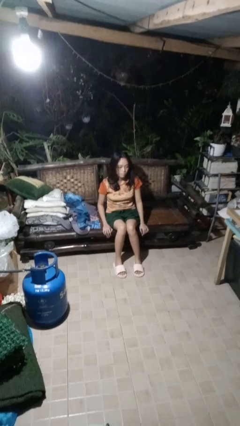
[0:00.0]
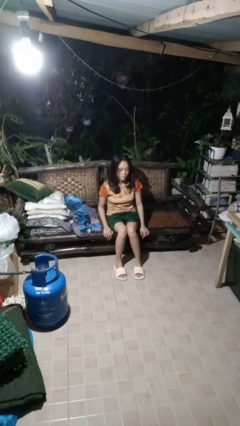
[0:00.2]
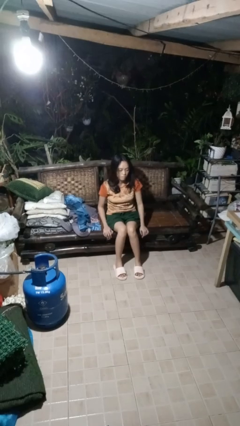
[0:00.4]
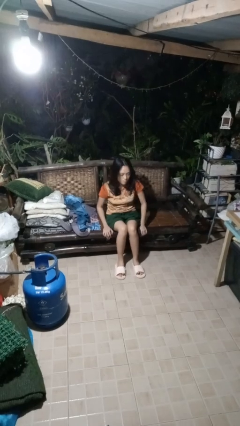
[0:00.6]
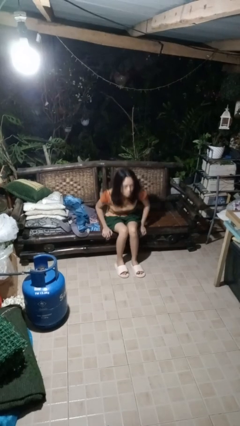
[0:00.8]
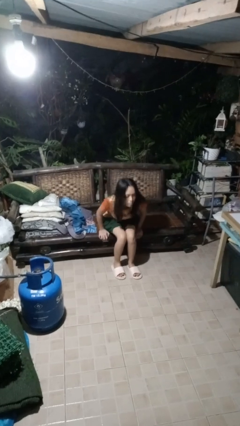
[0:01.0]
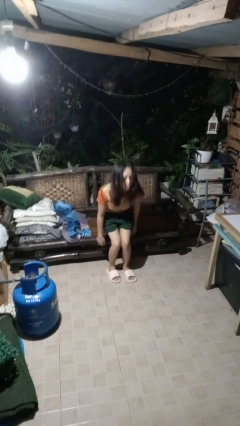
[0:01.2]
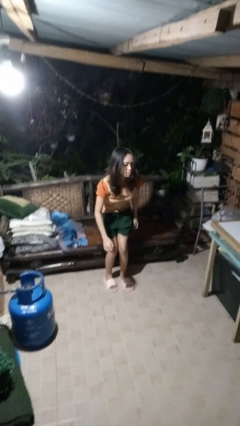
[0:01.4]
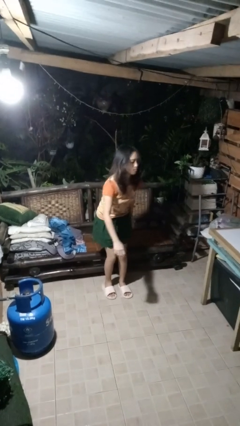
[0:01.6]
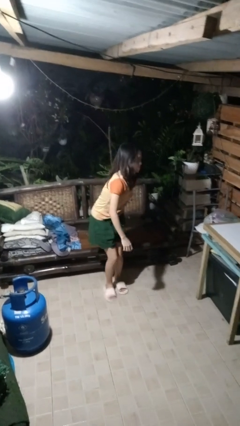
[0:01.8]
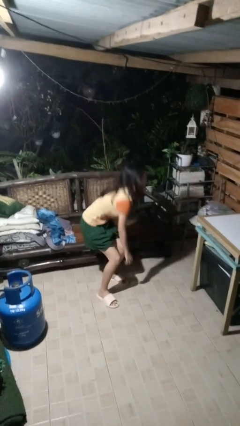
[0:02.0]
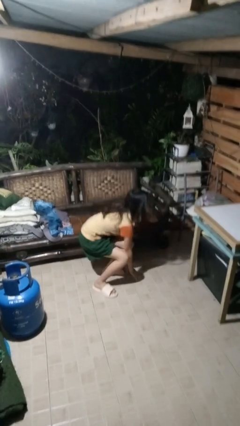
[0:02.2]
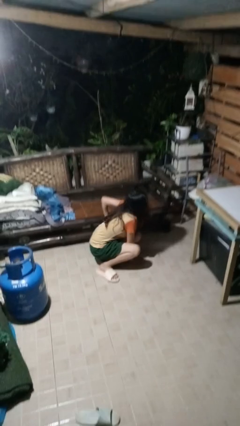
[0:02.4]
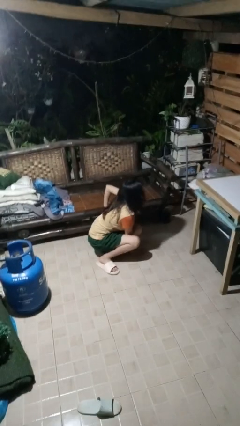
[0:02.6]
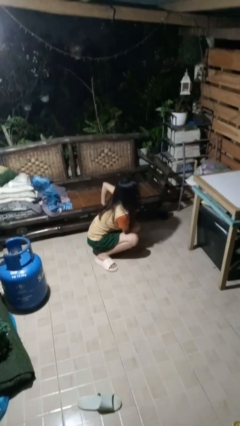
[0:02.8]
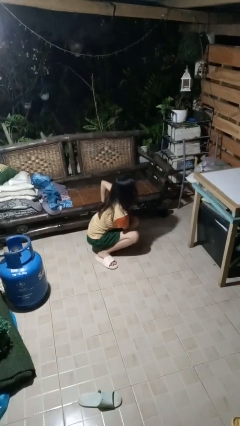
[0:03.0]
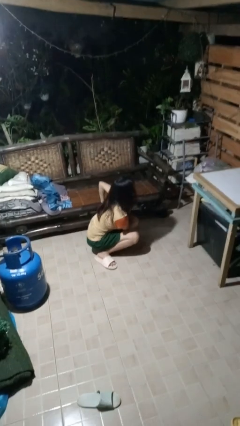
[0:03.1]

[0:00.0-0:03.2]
person falls from chair

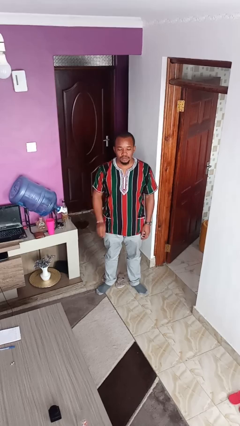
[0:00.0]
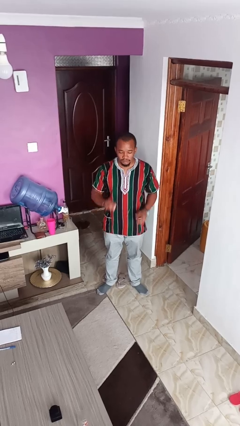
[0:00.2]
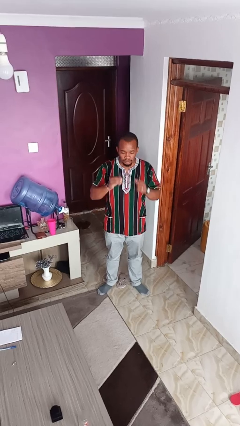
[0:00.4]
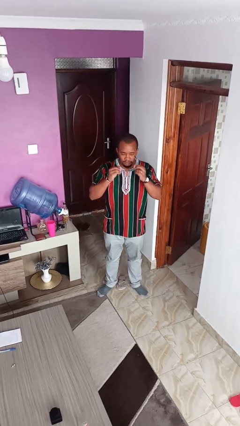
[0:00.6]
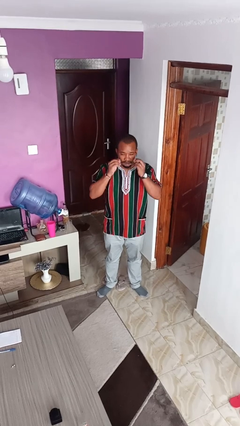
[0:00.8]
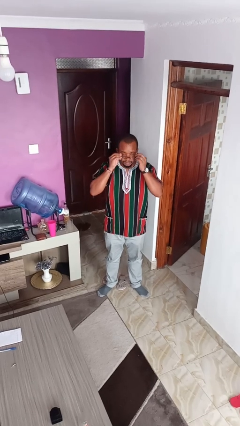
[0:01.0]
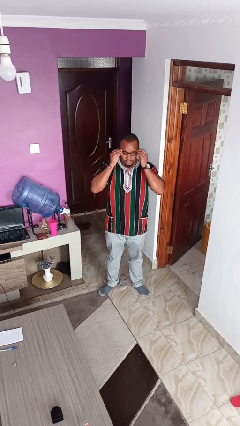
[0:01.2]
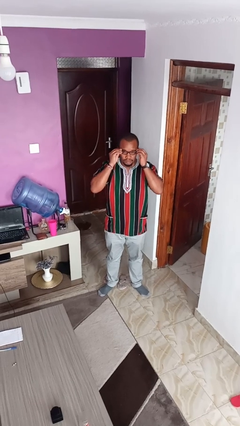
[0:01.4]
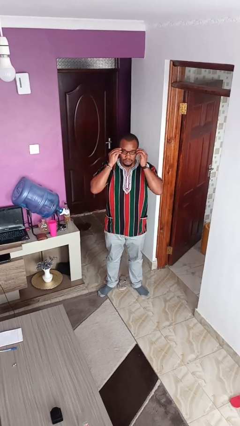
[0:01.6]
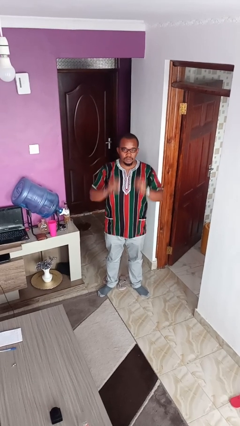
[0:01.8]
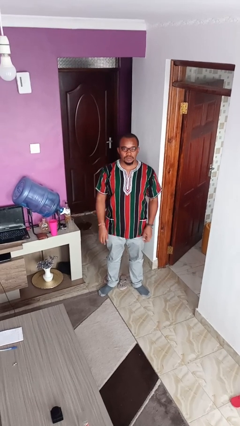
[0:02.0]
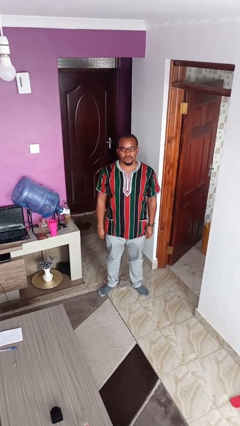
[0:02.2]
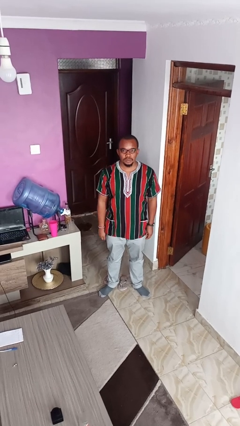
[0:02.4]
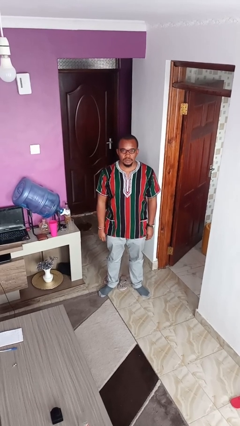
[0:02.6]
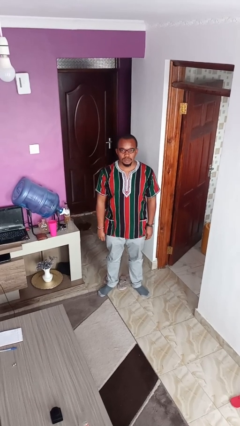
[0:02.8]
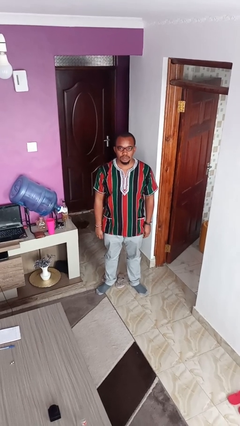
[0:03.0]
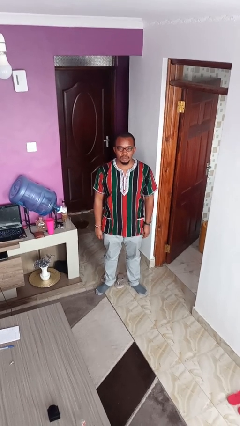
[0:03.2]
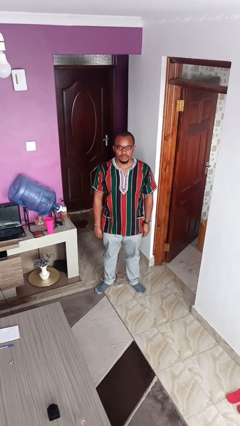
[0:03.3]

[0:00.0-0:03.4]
person puts on glasses

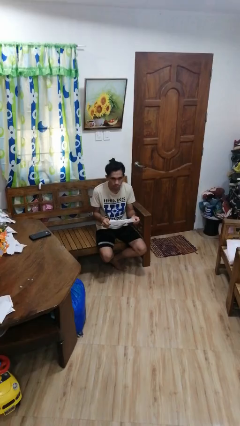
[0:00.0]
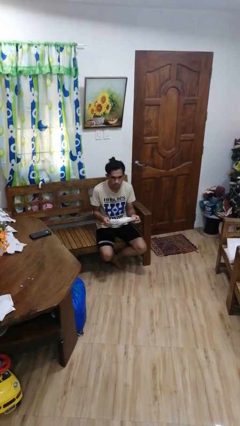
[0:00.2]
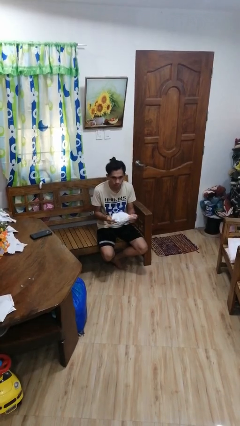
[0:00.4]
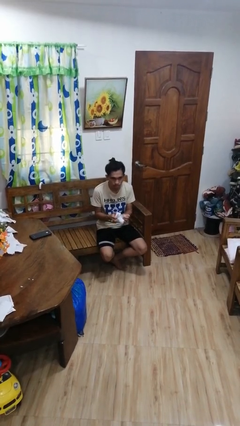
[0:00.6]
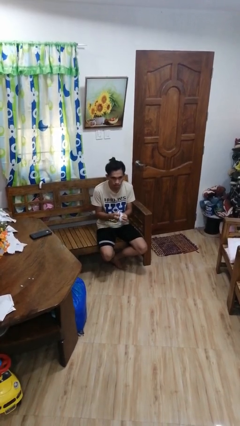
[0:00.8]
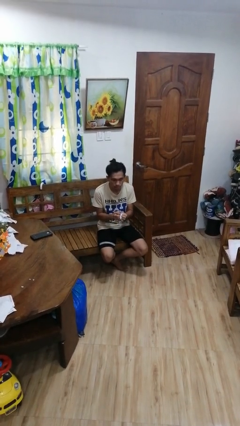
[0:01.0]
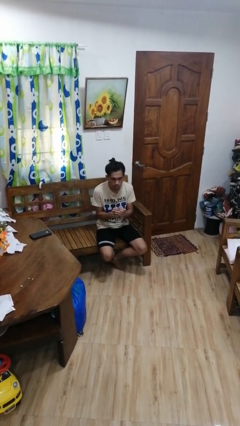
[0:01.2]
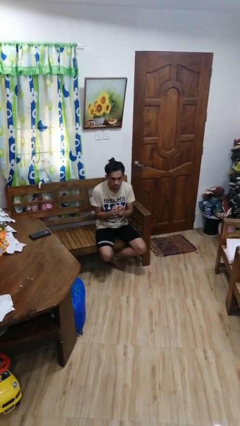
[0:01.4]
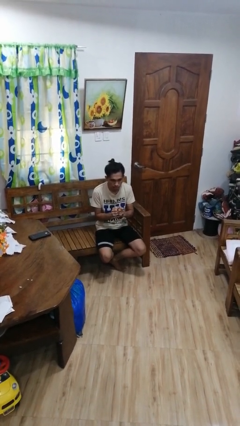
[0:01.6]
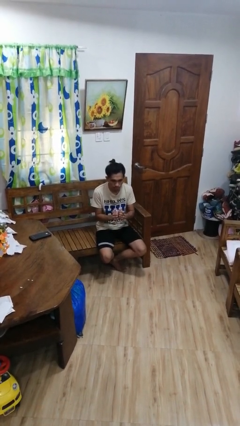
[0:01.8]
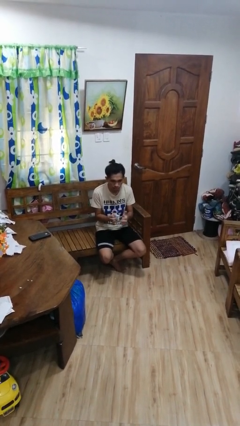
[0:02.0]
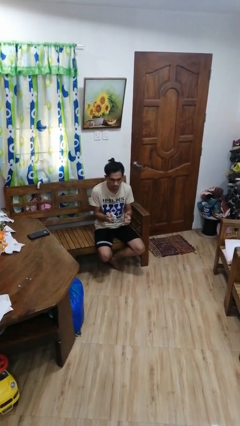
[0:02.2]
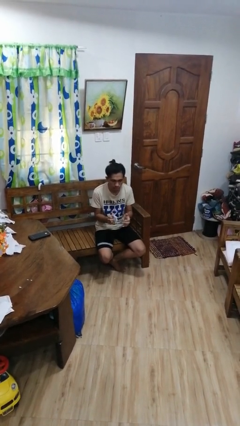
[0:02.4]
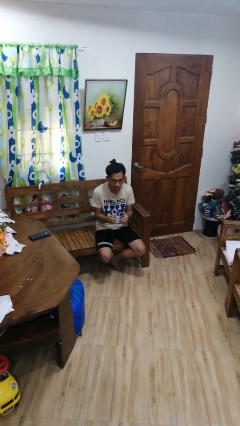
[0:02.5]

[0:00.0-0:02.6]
person crumples paper

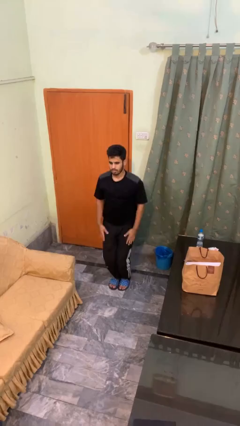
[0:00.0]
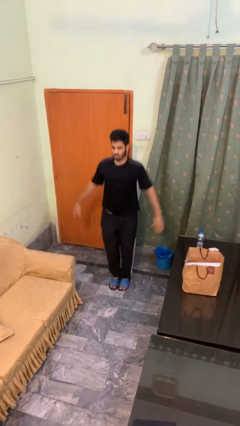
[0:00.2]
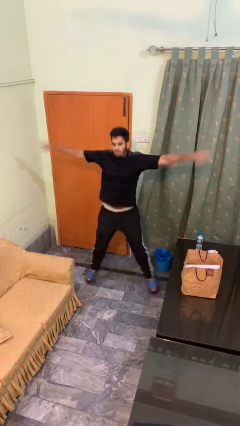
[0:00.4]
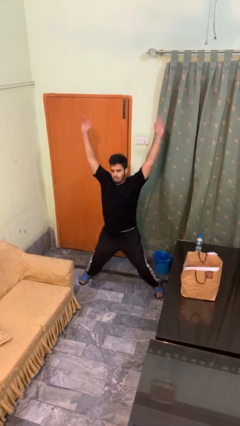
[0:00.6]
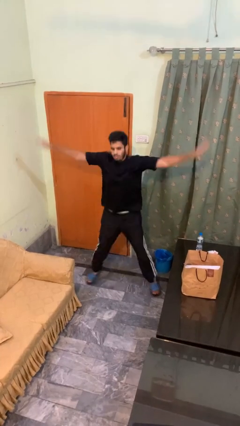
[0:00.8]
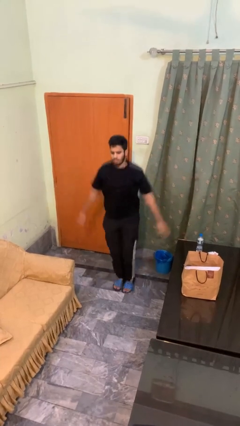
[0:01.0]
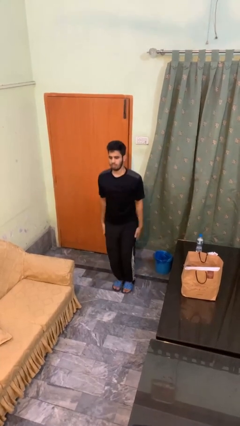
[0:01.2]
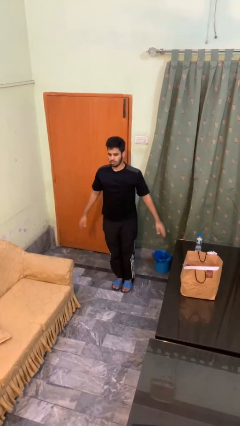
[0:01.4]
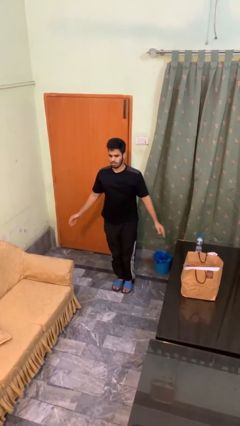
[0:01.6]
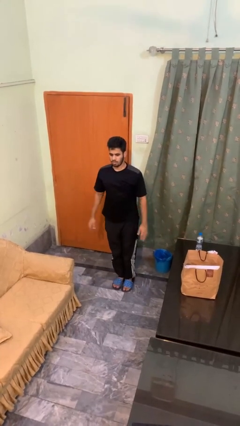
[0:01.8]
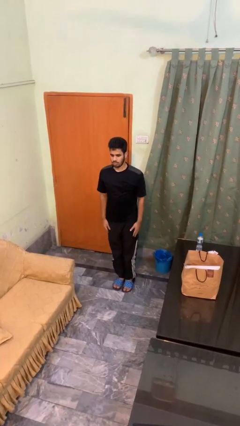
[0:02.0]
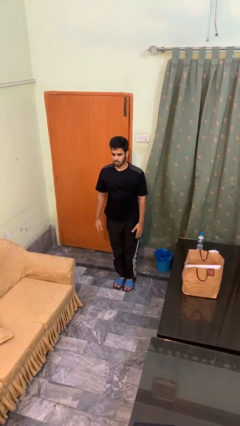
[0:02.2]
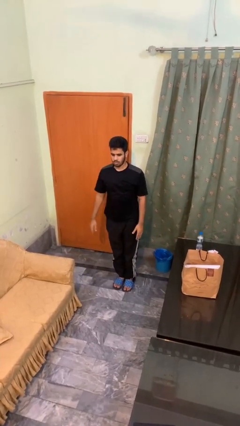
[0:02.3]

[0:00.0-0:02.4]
person exercises with jumping jacks

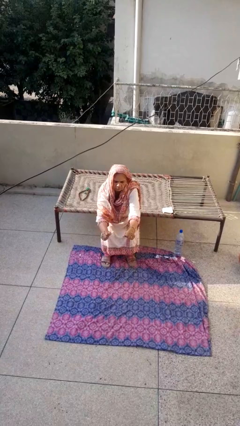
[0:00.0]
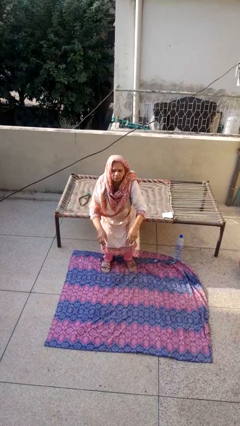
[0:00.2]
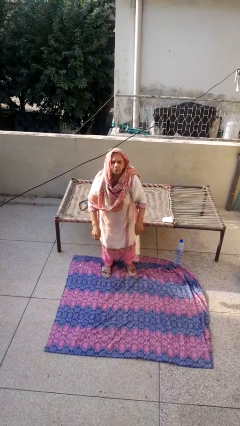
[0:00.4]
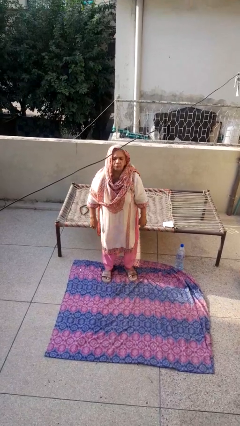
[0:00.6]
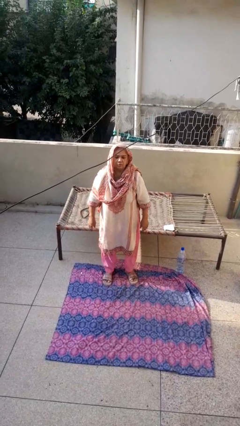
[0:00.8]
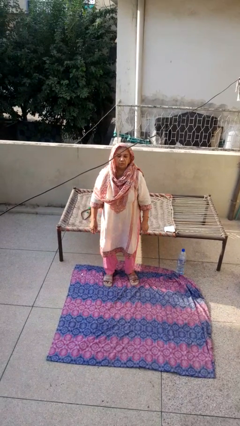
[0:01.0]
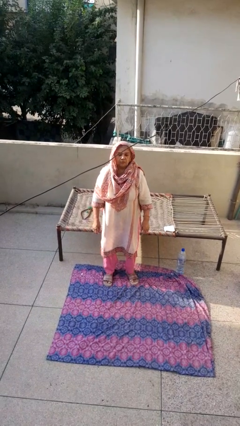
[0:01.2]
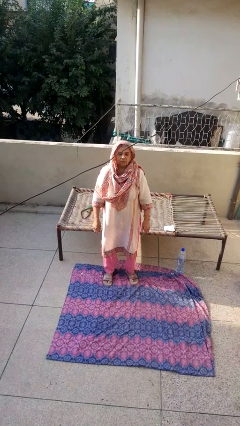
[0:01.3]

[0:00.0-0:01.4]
person stands up

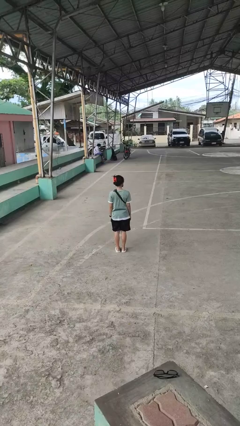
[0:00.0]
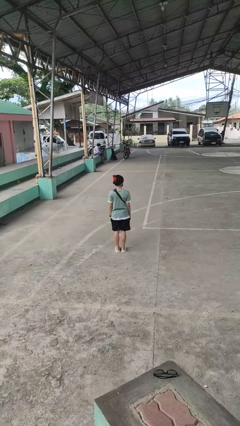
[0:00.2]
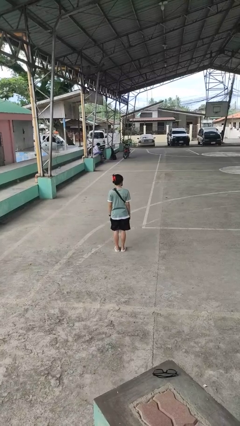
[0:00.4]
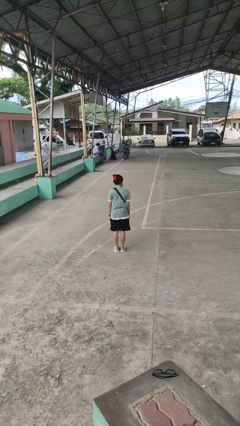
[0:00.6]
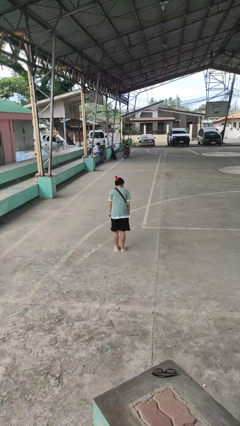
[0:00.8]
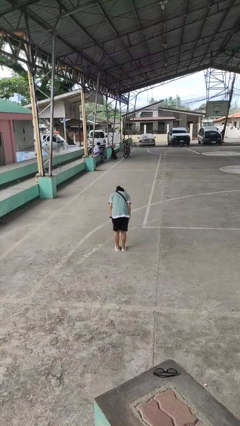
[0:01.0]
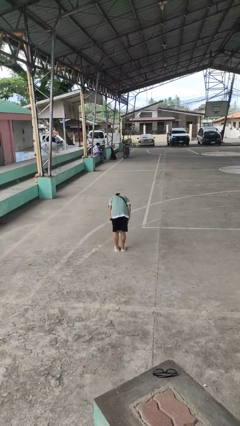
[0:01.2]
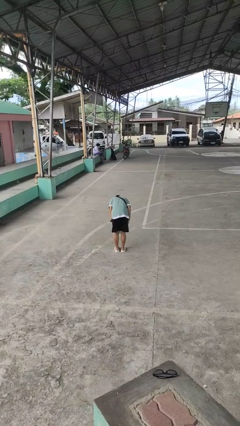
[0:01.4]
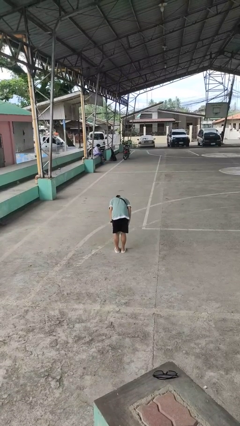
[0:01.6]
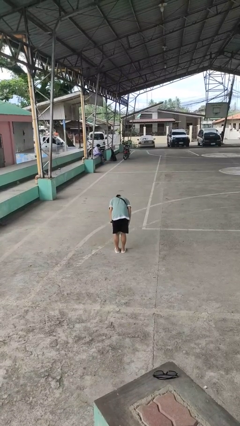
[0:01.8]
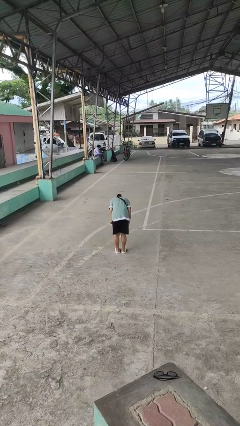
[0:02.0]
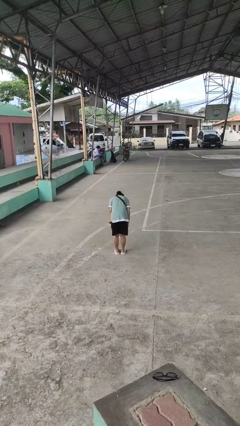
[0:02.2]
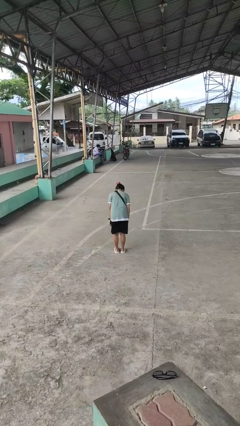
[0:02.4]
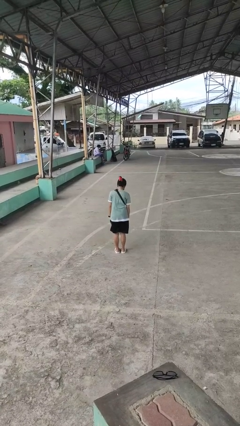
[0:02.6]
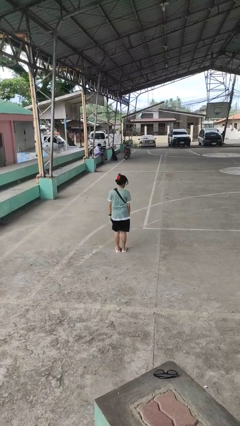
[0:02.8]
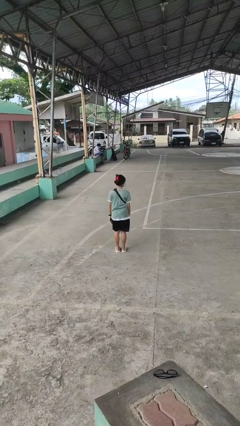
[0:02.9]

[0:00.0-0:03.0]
person bows

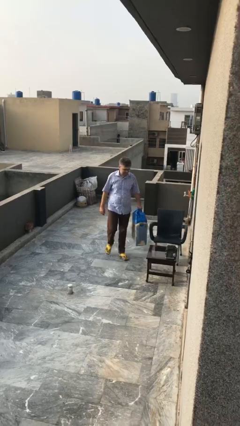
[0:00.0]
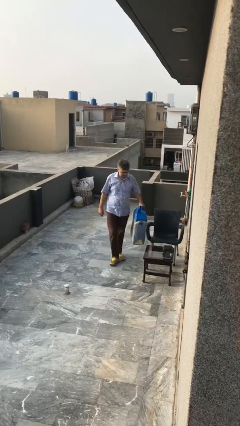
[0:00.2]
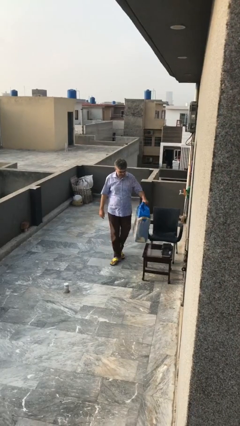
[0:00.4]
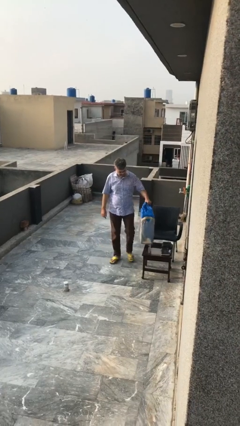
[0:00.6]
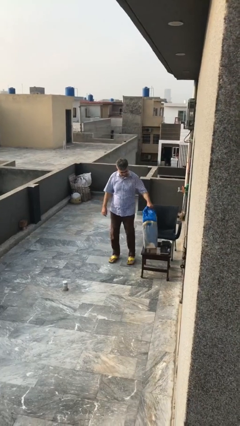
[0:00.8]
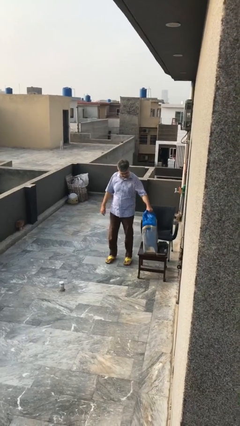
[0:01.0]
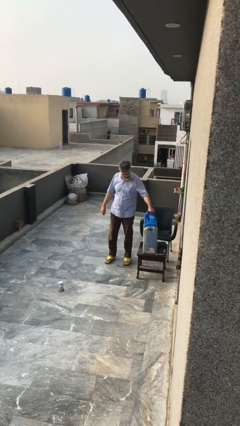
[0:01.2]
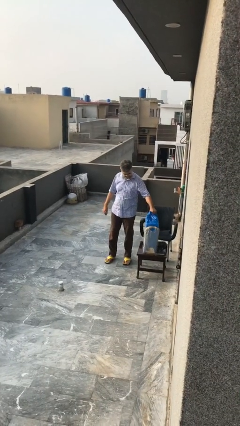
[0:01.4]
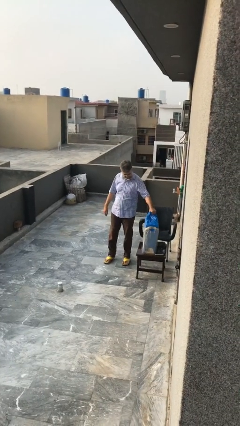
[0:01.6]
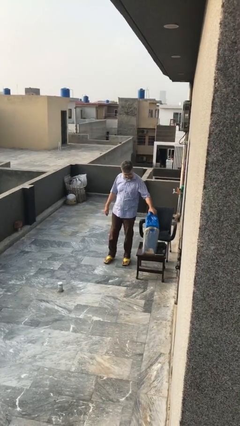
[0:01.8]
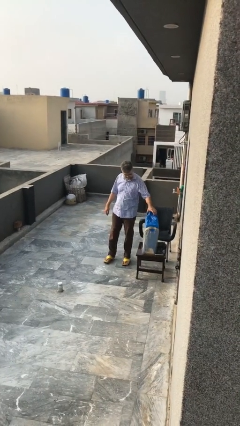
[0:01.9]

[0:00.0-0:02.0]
person puts down object on table
